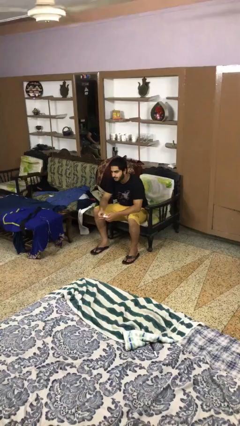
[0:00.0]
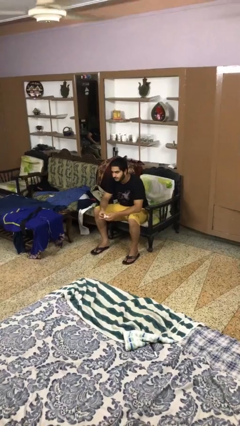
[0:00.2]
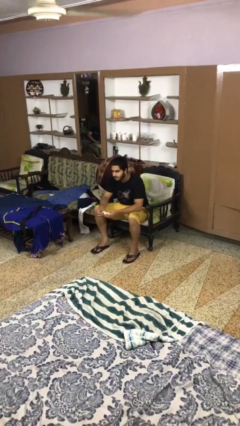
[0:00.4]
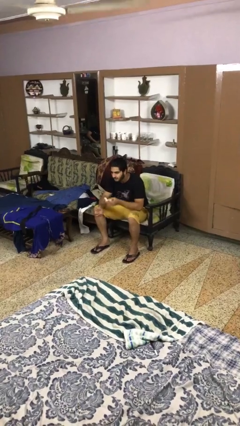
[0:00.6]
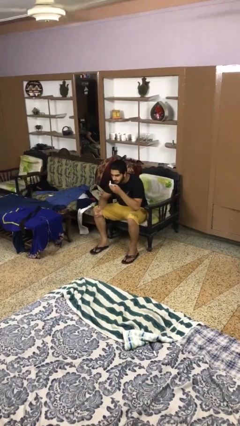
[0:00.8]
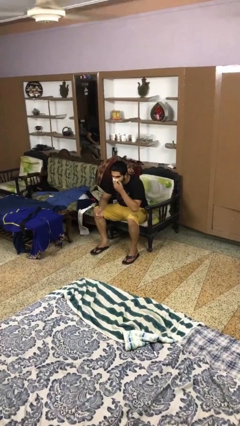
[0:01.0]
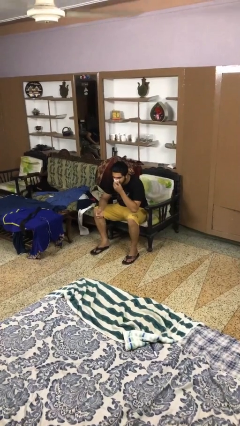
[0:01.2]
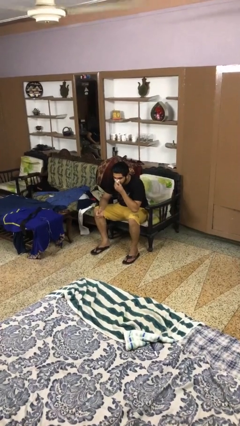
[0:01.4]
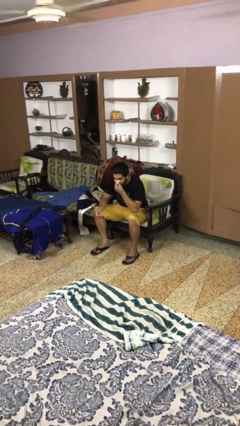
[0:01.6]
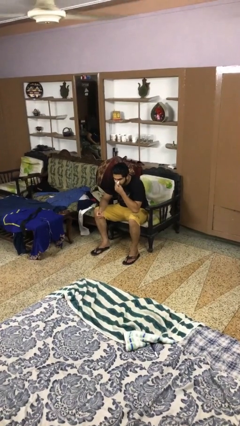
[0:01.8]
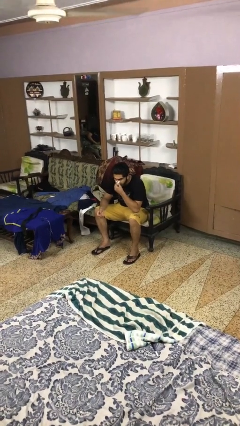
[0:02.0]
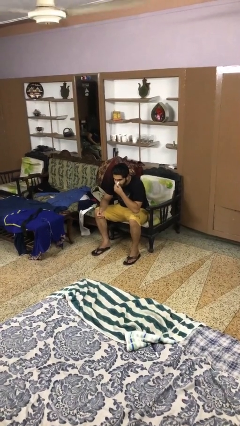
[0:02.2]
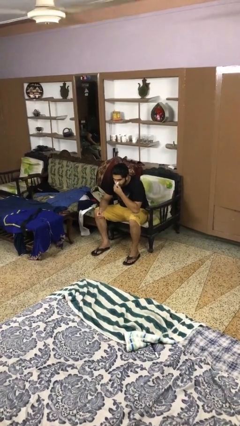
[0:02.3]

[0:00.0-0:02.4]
person blows nose

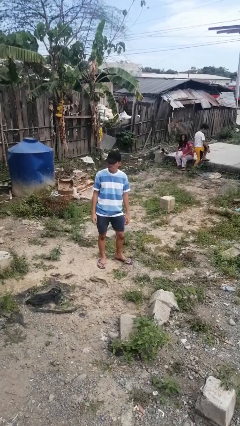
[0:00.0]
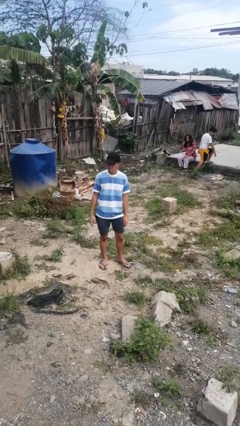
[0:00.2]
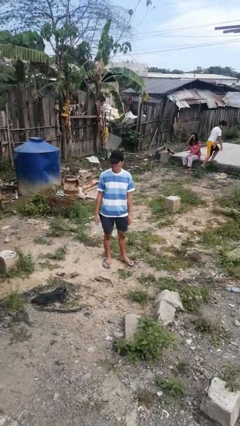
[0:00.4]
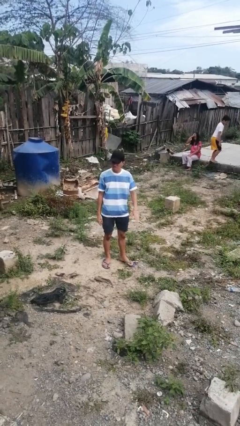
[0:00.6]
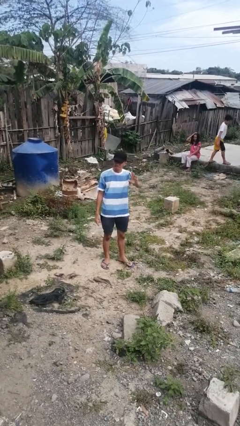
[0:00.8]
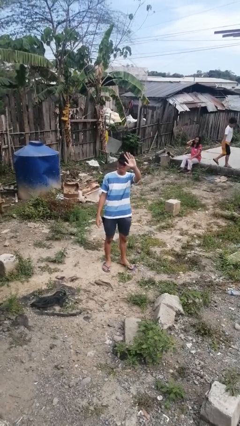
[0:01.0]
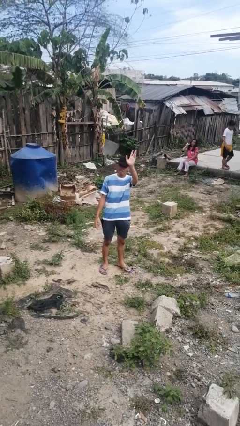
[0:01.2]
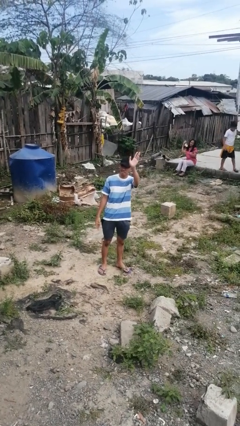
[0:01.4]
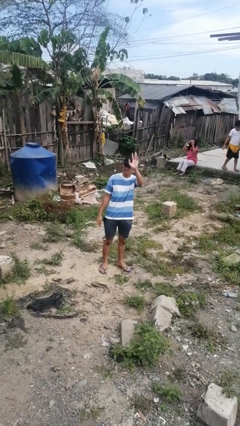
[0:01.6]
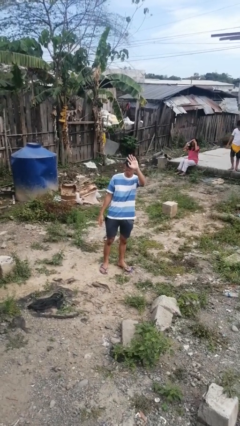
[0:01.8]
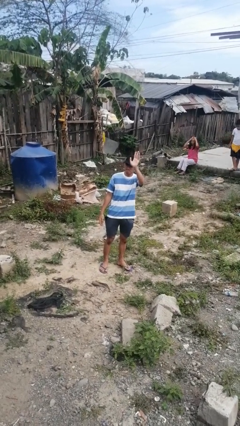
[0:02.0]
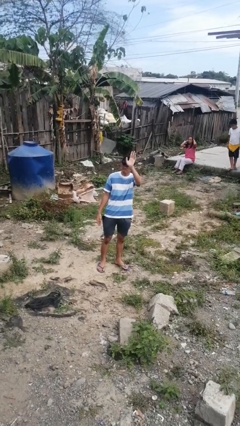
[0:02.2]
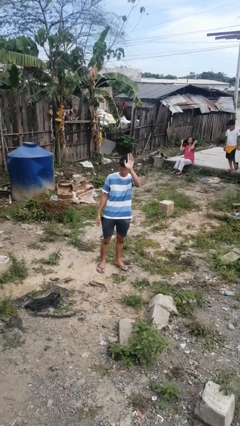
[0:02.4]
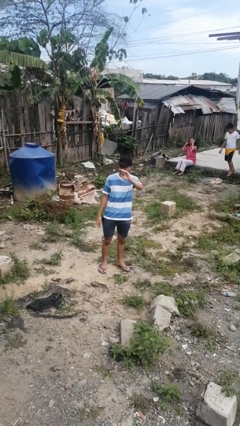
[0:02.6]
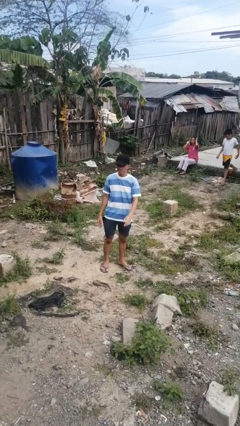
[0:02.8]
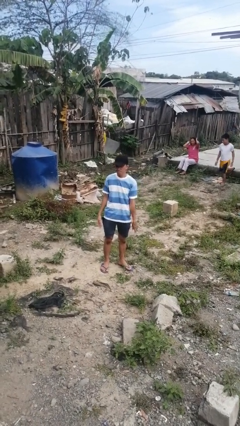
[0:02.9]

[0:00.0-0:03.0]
person waves at person

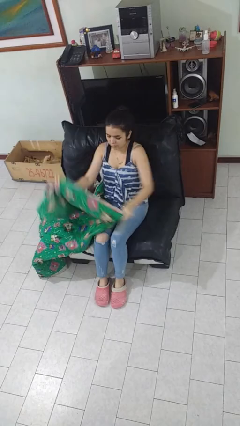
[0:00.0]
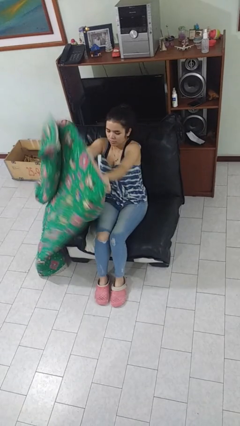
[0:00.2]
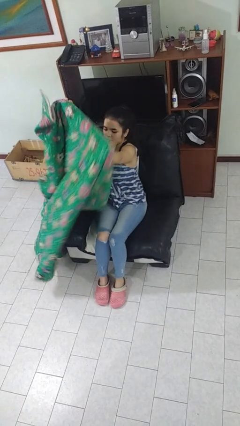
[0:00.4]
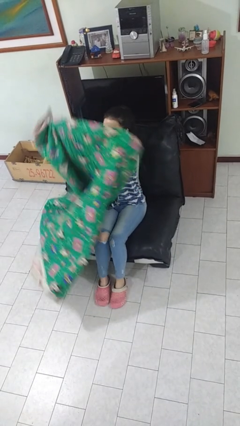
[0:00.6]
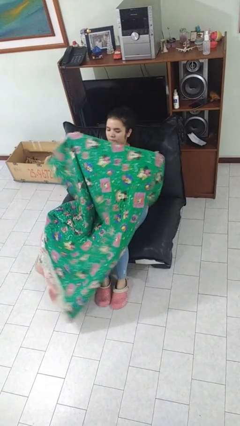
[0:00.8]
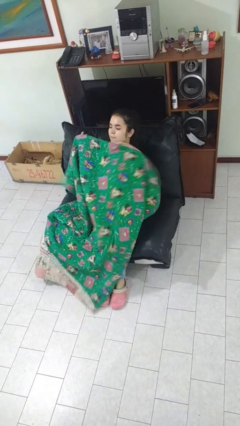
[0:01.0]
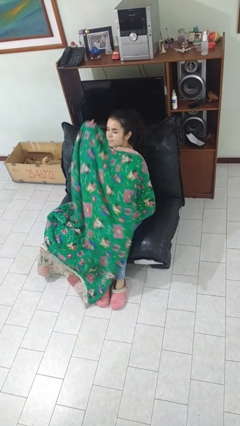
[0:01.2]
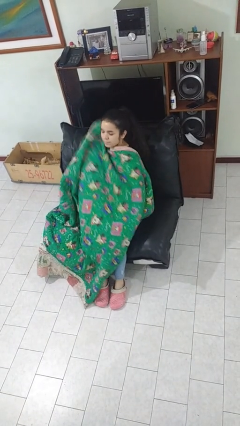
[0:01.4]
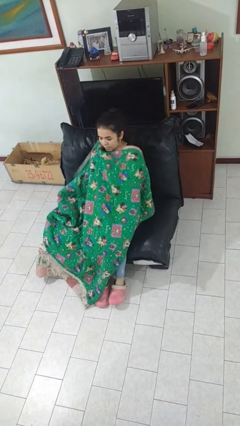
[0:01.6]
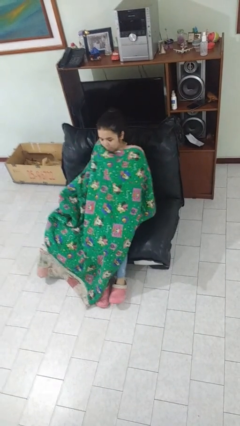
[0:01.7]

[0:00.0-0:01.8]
person covers with blanket

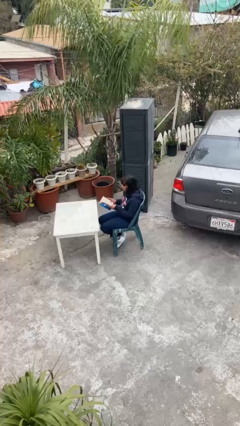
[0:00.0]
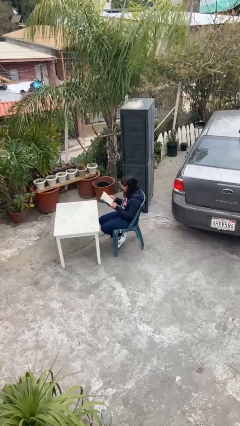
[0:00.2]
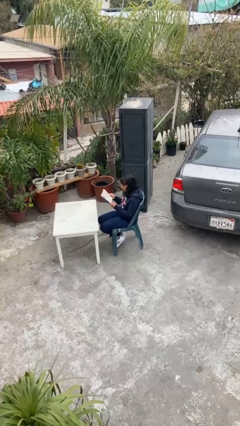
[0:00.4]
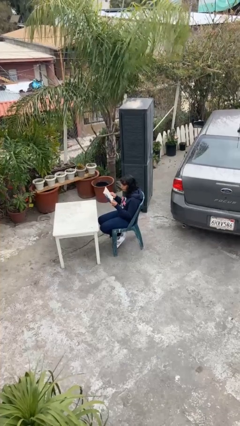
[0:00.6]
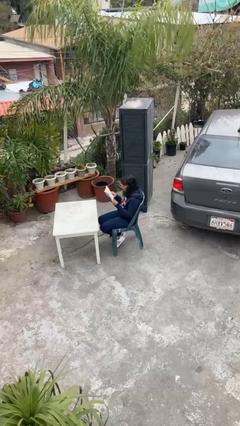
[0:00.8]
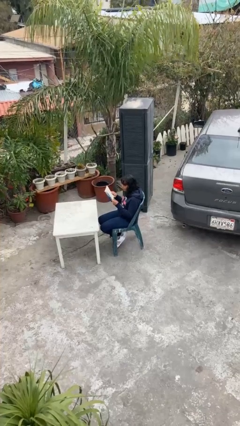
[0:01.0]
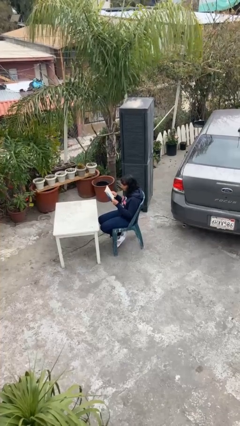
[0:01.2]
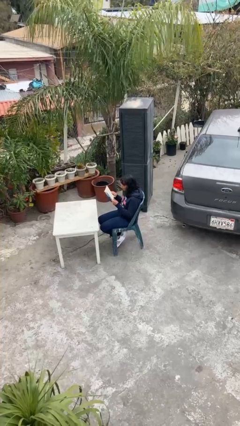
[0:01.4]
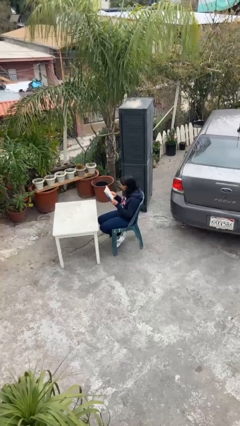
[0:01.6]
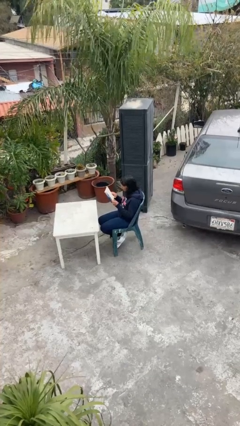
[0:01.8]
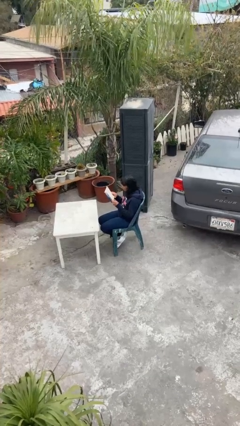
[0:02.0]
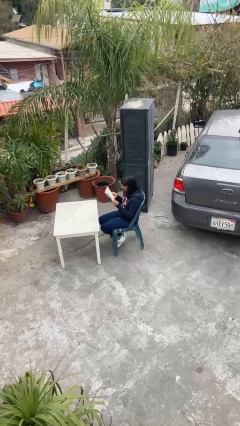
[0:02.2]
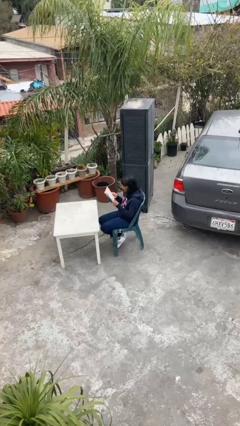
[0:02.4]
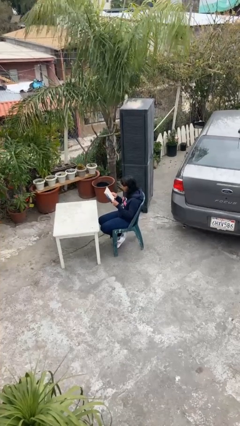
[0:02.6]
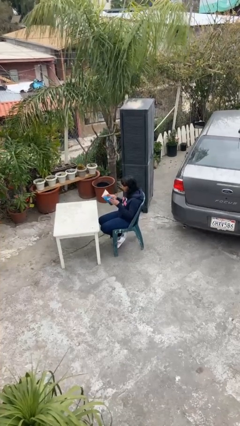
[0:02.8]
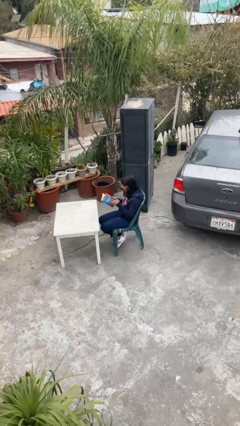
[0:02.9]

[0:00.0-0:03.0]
person reads document

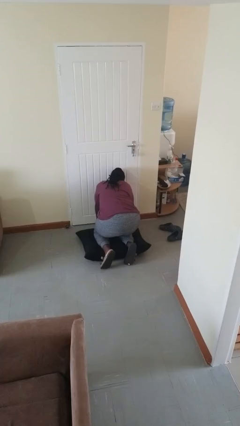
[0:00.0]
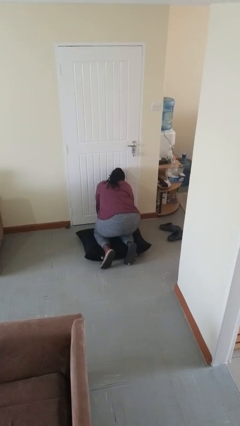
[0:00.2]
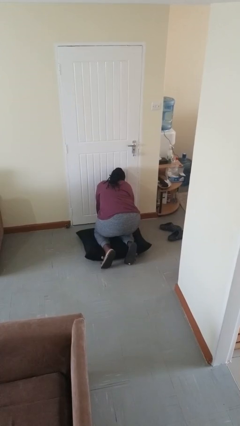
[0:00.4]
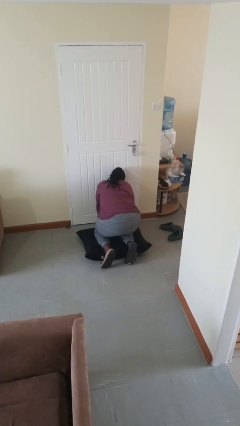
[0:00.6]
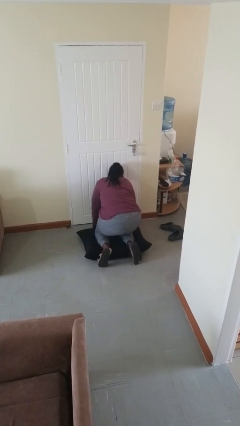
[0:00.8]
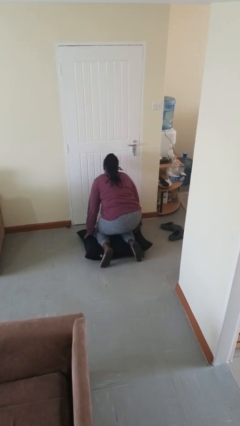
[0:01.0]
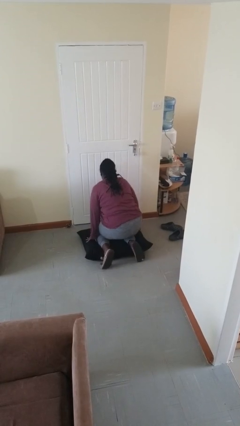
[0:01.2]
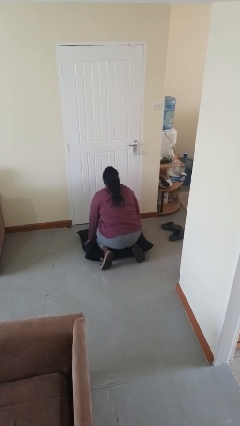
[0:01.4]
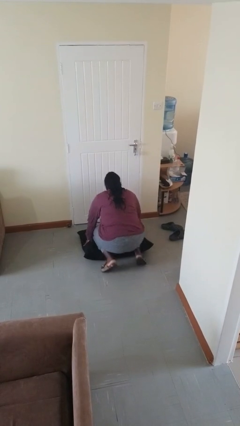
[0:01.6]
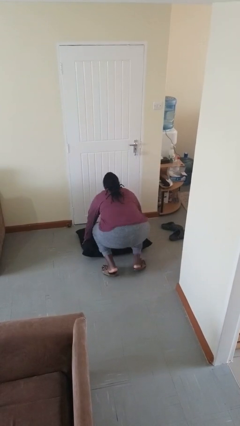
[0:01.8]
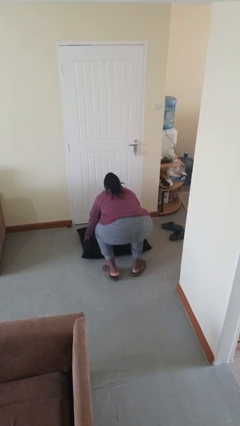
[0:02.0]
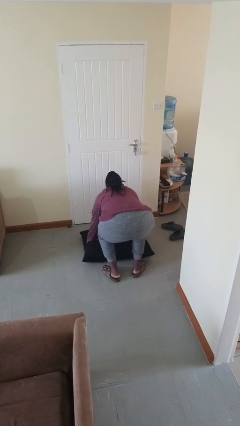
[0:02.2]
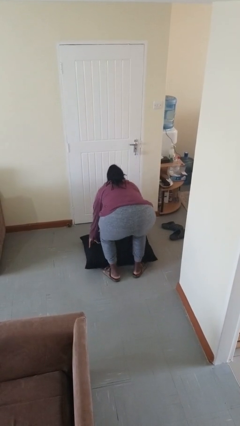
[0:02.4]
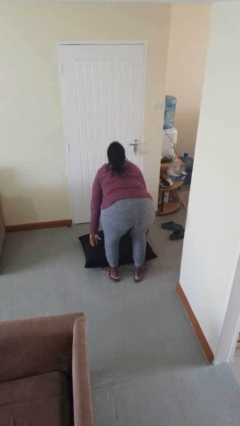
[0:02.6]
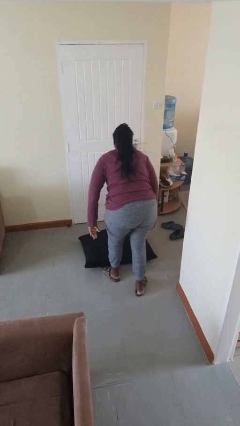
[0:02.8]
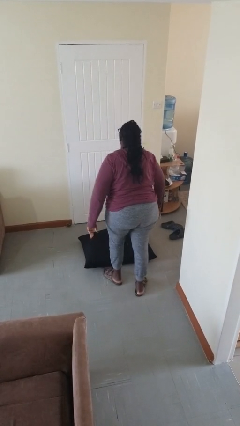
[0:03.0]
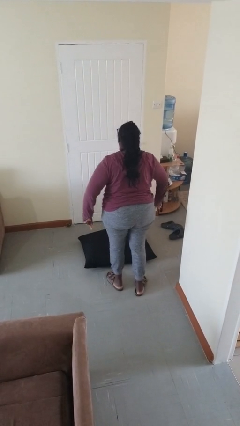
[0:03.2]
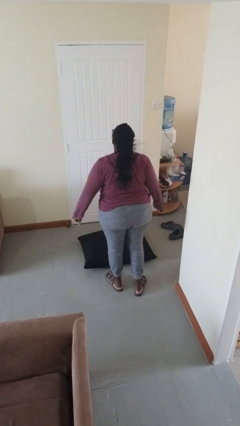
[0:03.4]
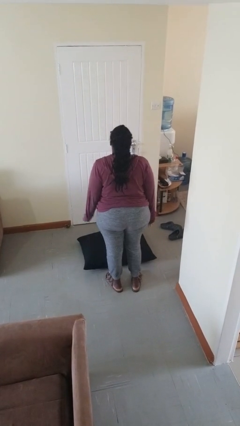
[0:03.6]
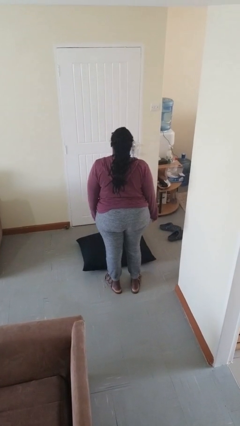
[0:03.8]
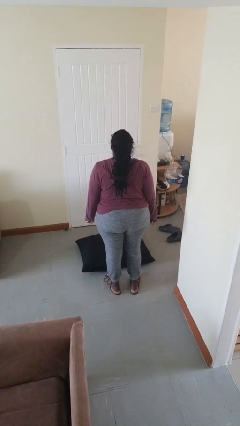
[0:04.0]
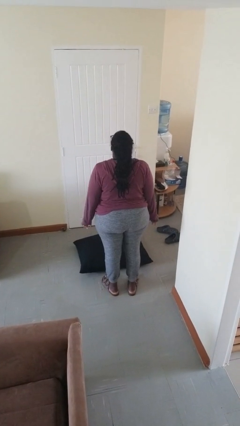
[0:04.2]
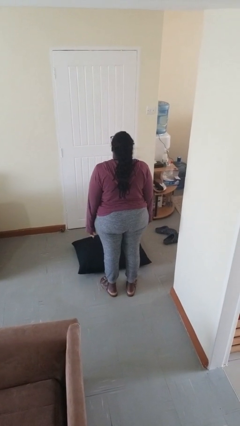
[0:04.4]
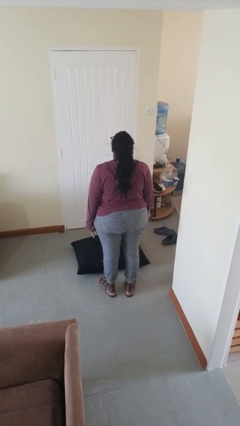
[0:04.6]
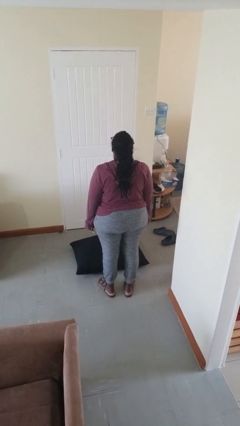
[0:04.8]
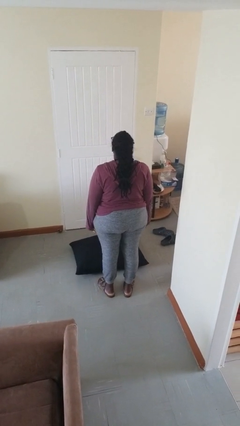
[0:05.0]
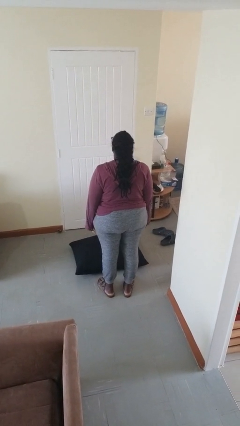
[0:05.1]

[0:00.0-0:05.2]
person stands up from floor

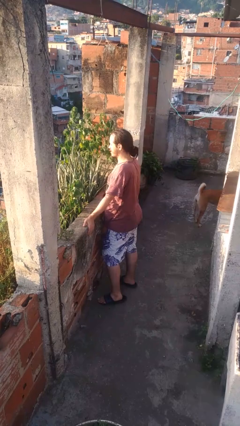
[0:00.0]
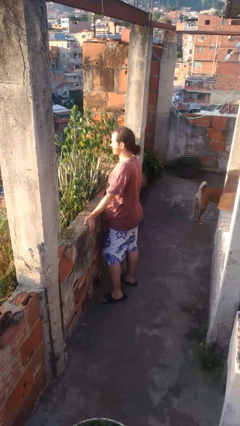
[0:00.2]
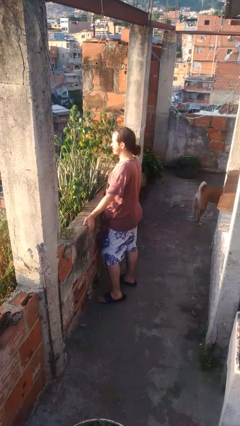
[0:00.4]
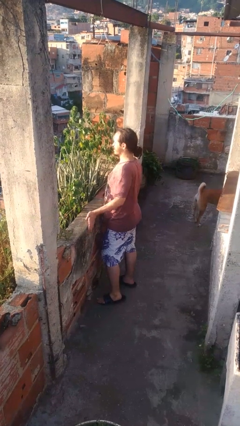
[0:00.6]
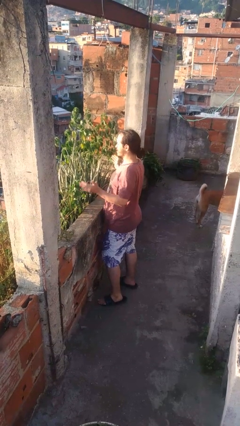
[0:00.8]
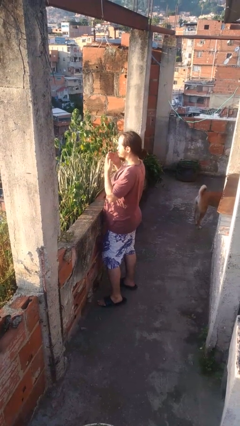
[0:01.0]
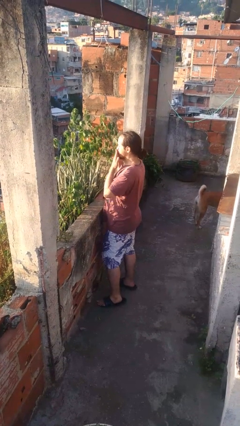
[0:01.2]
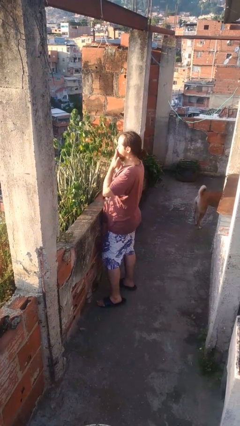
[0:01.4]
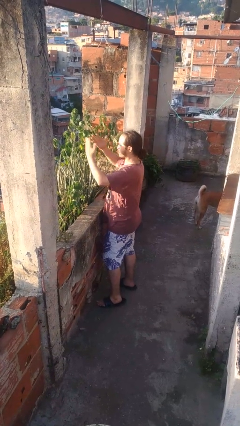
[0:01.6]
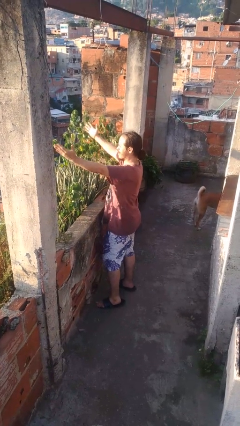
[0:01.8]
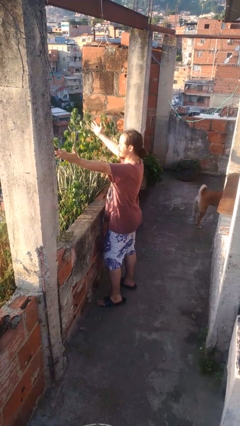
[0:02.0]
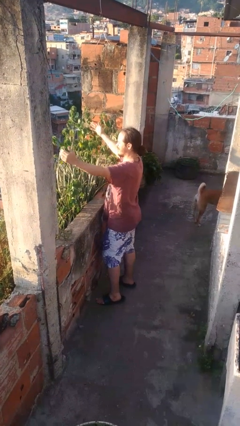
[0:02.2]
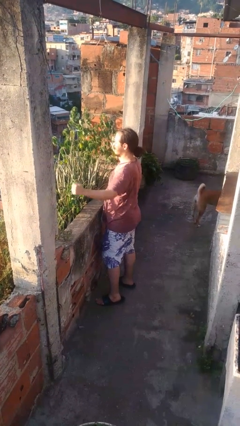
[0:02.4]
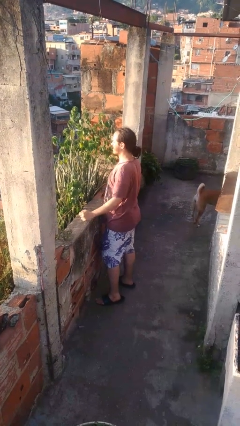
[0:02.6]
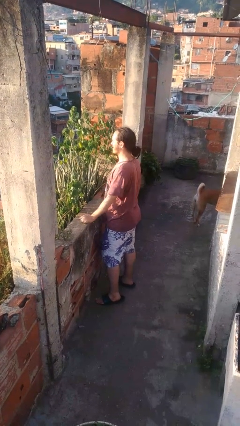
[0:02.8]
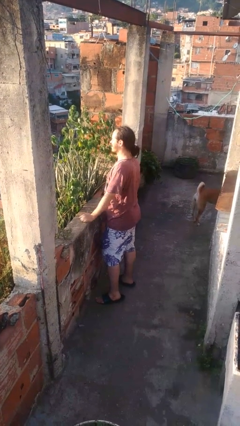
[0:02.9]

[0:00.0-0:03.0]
person gestures blow kiss
